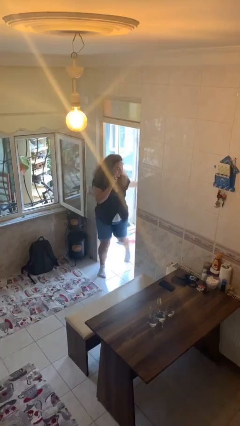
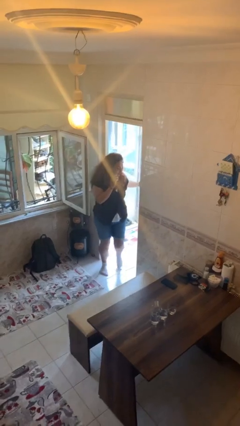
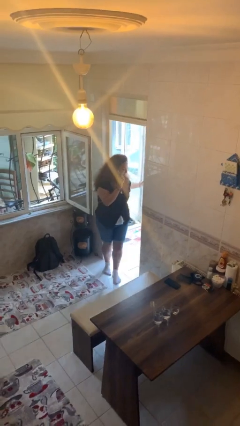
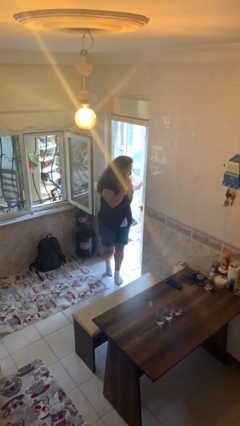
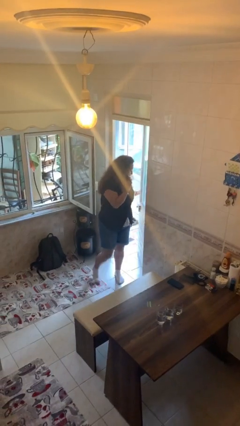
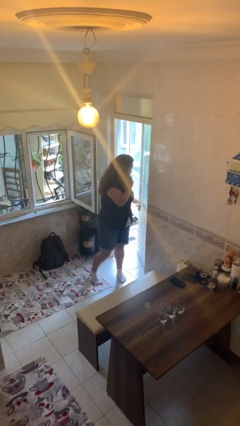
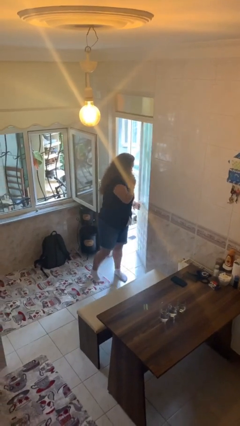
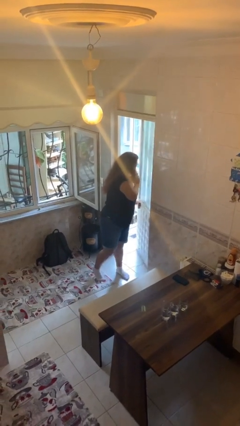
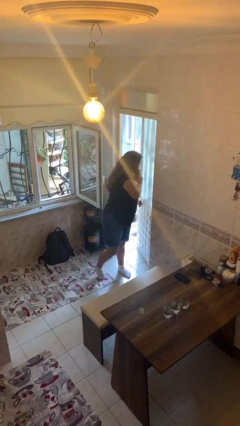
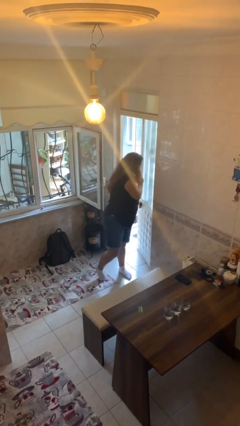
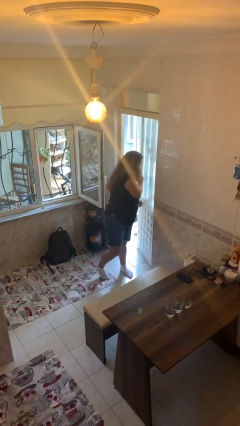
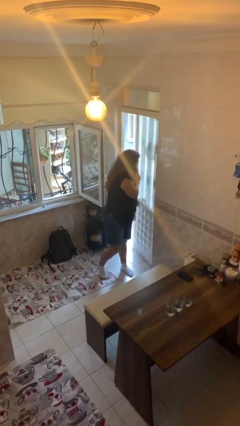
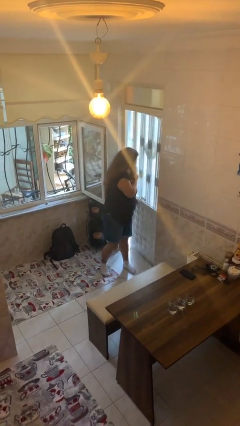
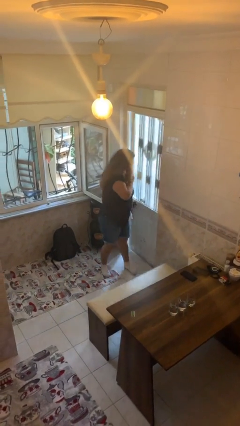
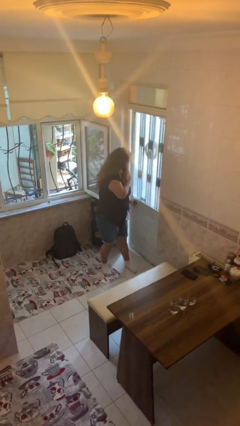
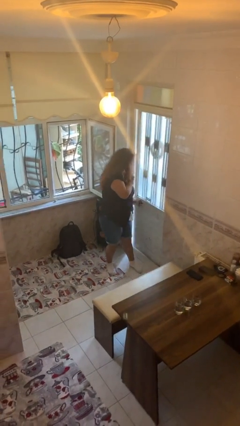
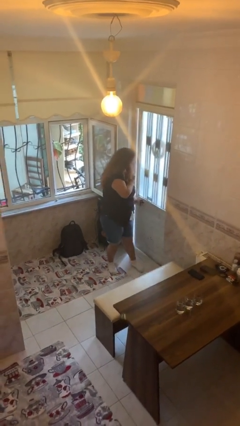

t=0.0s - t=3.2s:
person closes facility door

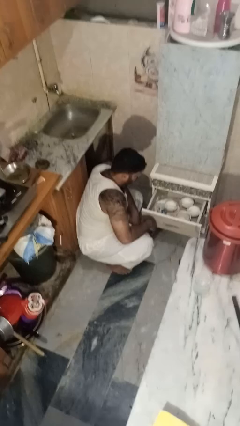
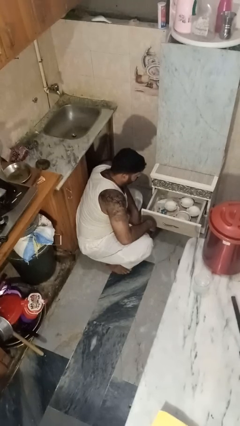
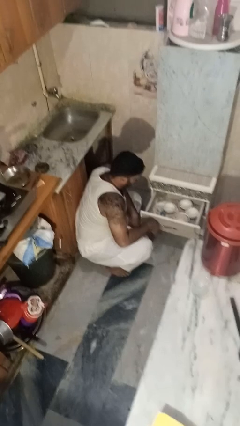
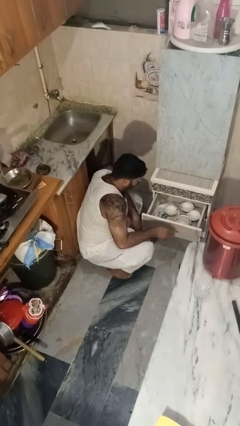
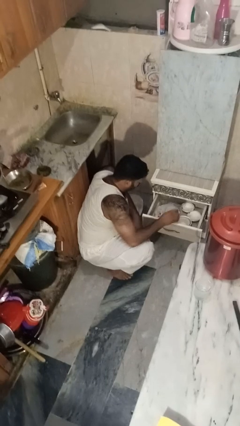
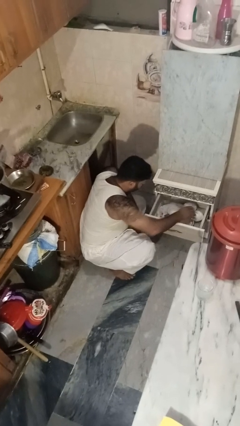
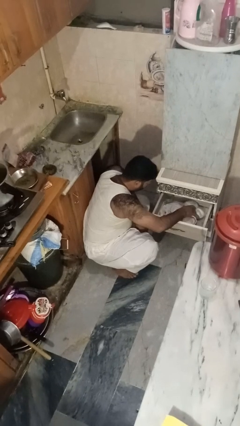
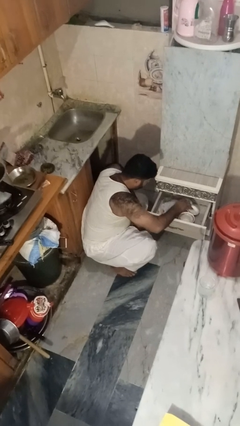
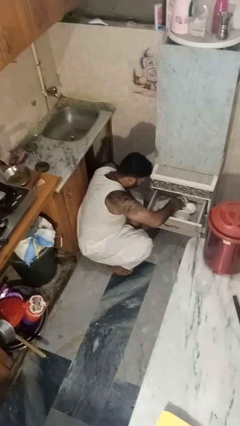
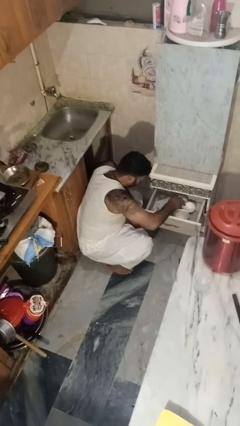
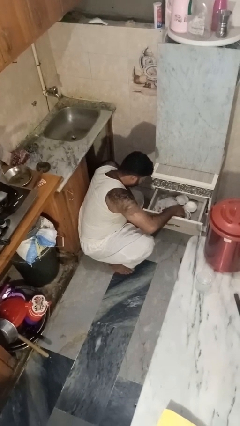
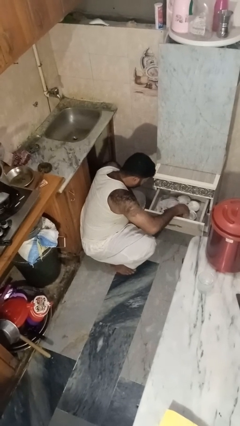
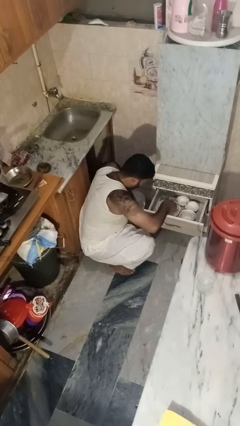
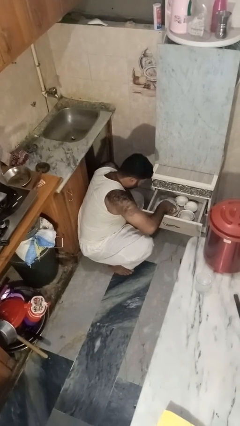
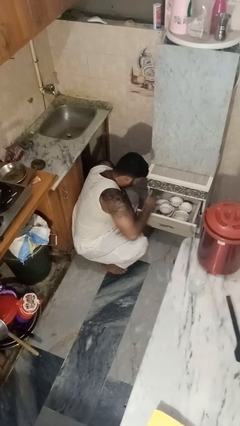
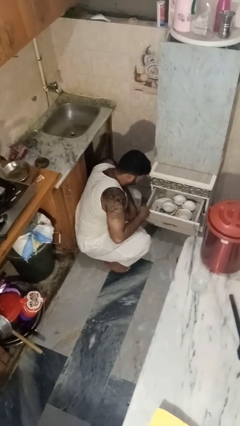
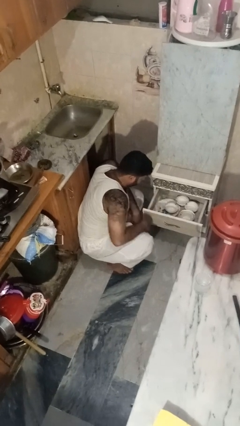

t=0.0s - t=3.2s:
person searches in kitchen drawer

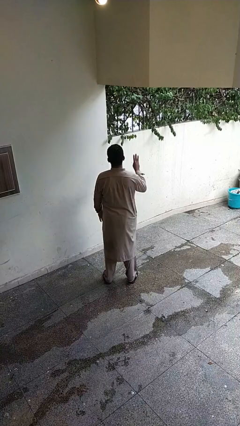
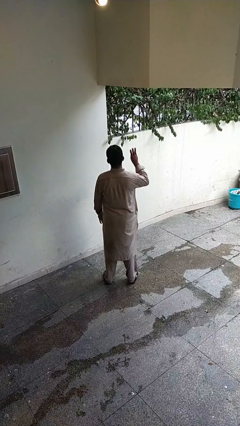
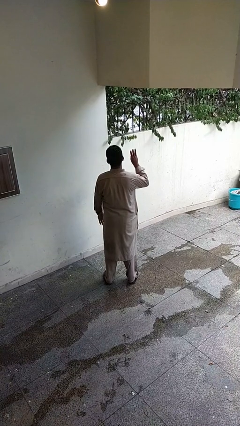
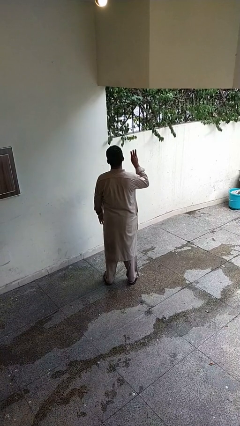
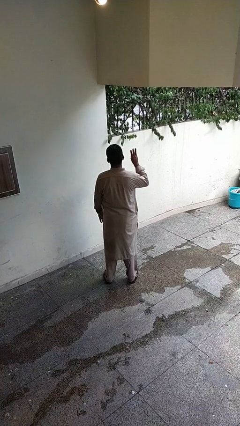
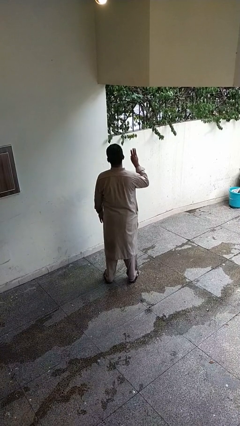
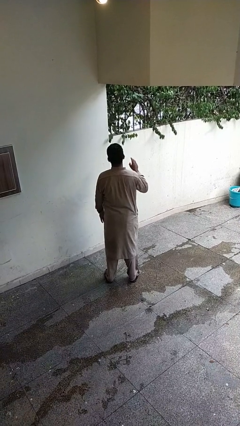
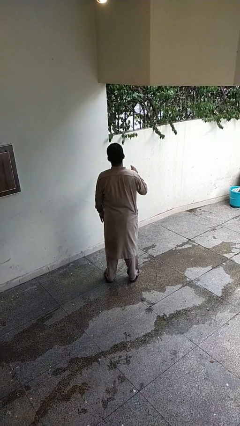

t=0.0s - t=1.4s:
person gestures number three

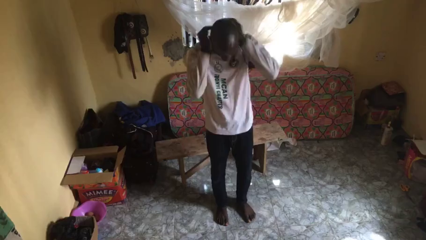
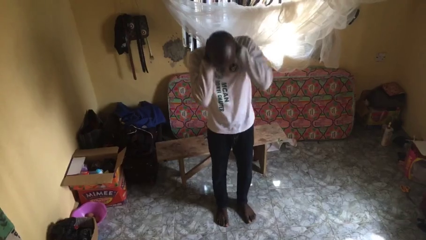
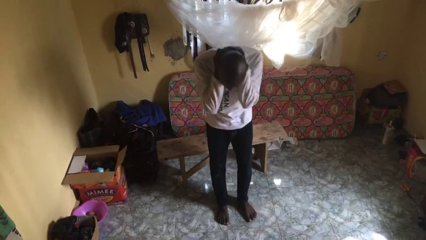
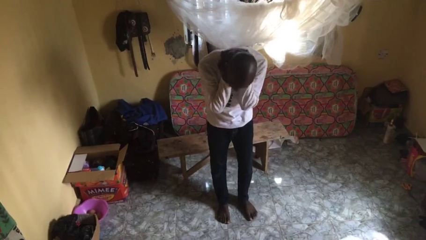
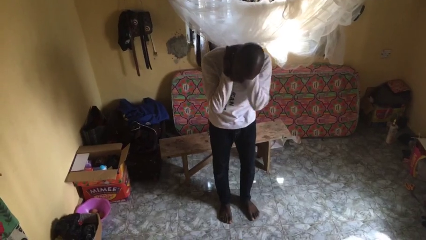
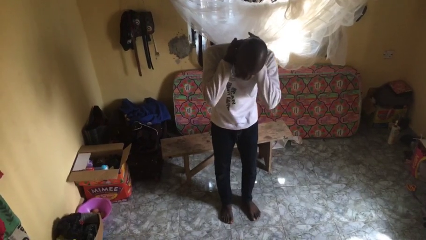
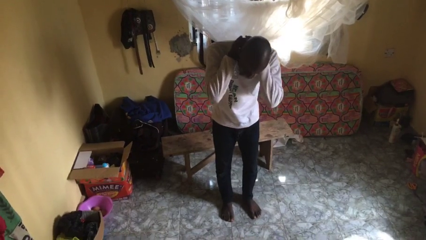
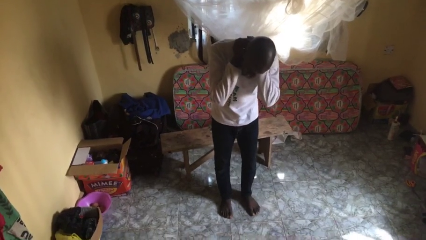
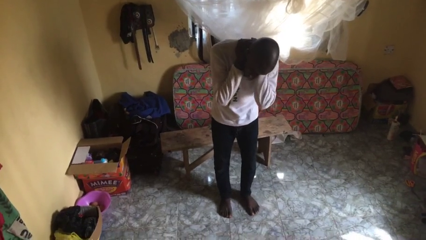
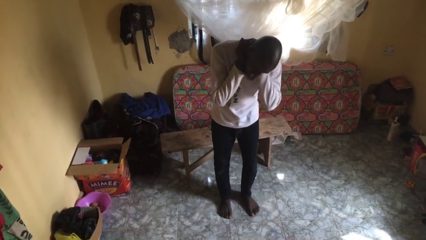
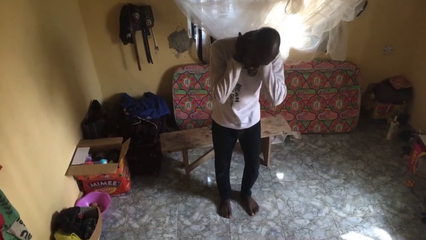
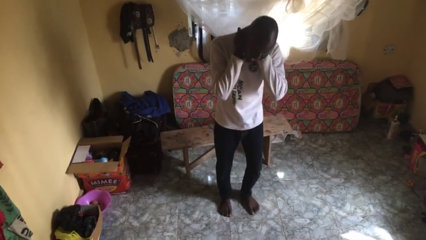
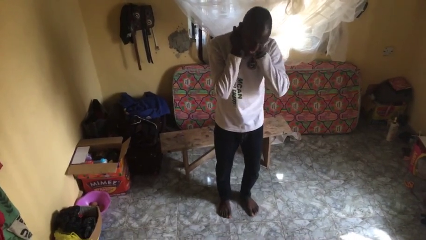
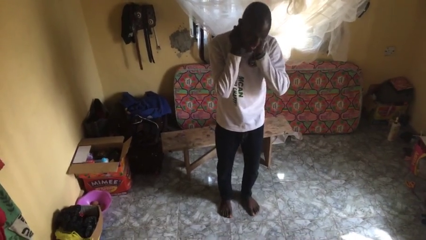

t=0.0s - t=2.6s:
person rubs neck

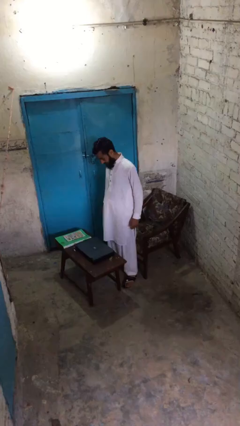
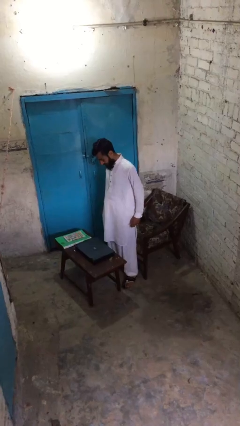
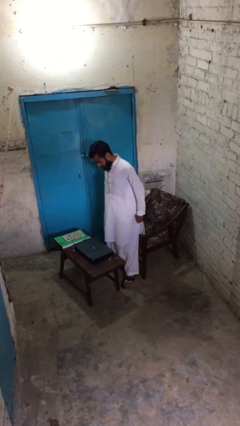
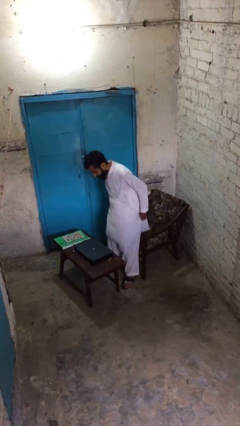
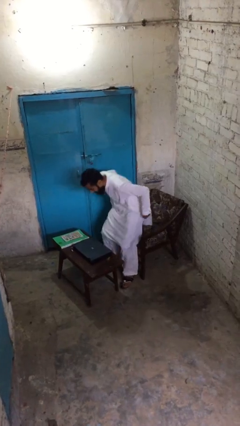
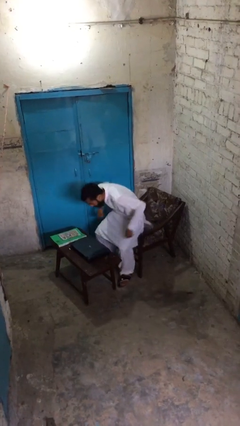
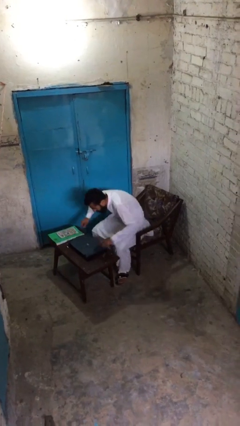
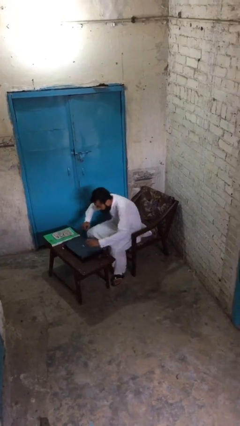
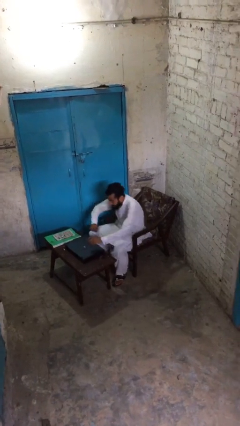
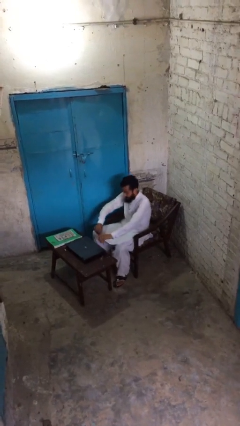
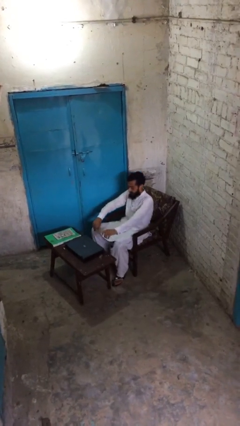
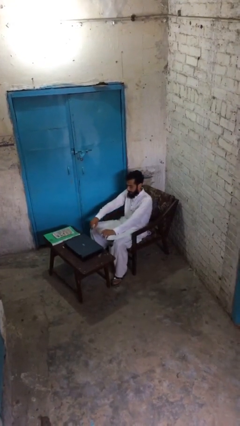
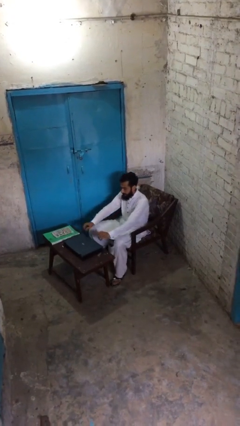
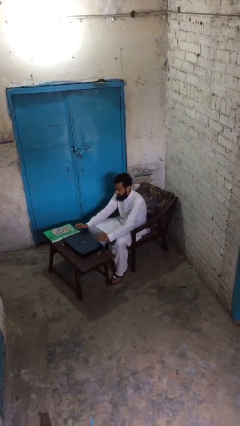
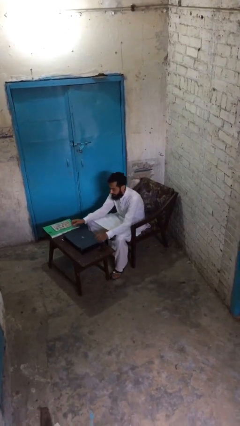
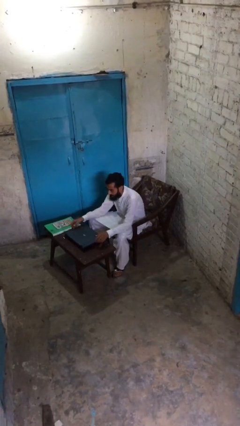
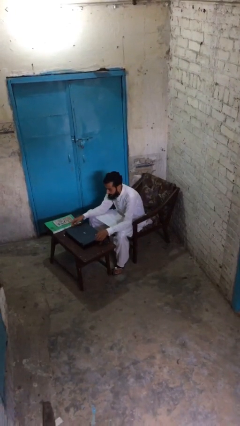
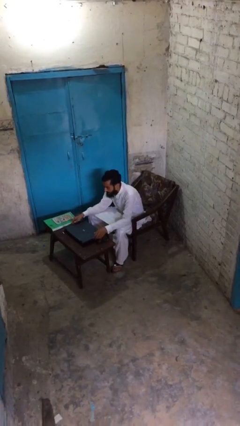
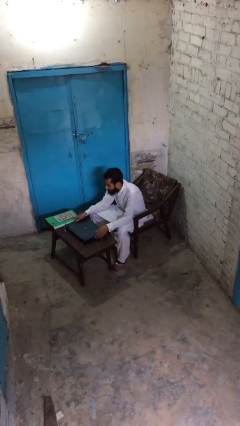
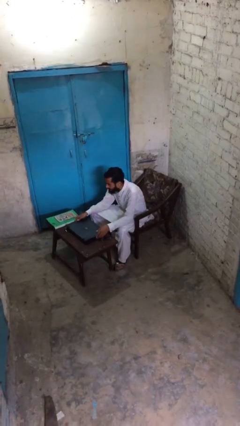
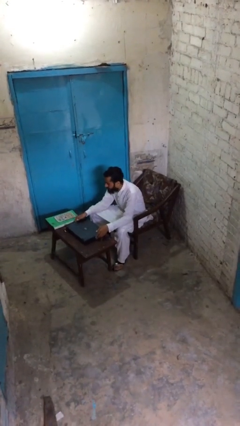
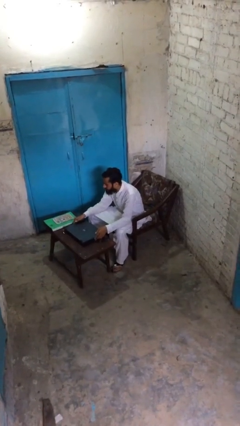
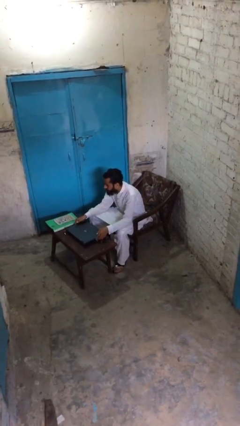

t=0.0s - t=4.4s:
person sits down

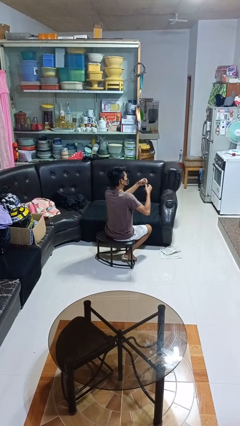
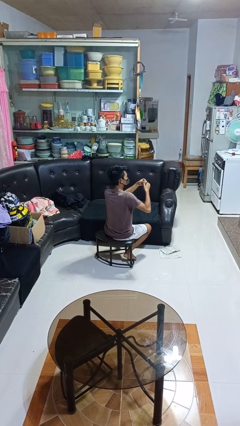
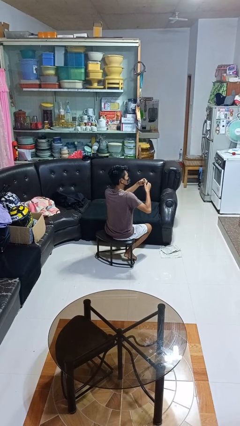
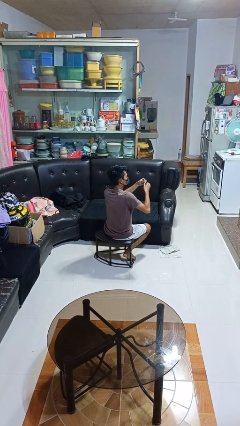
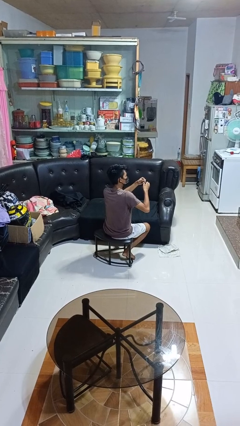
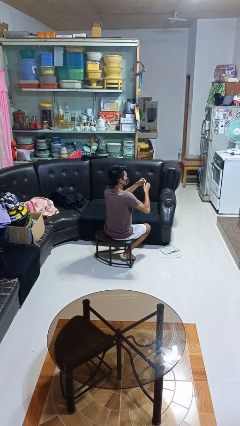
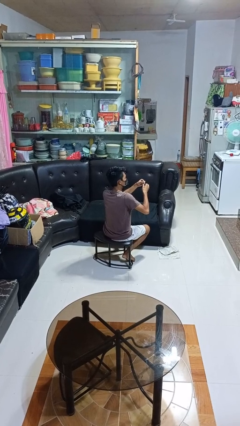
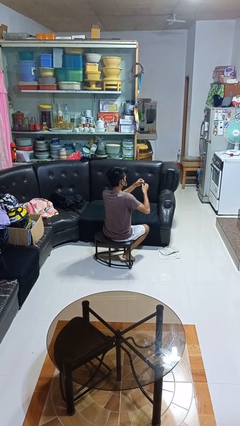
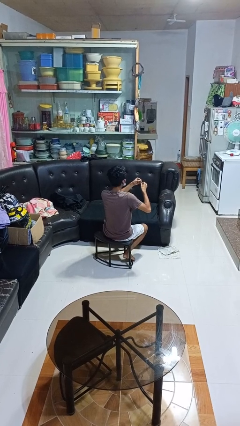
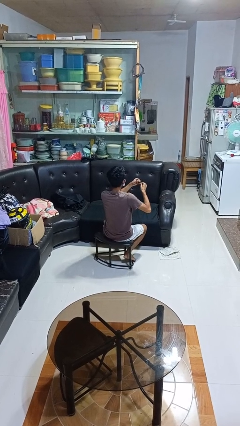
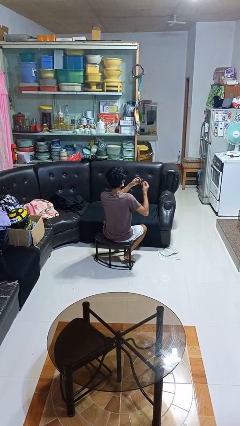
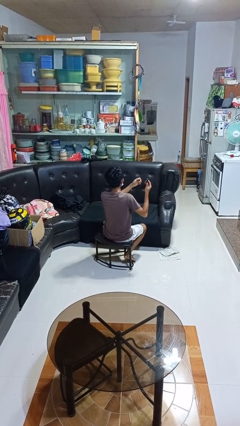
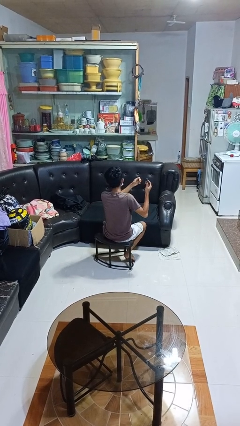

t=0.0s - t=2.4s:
person clips fingernails
